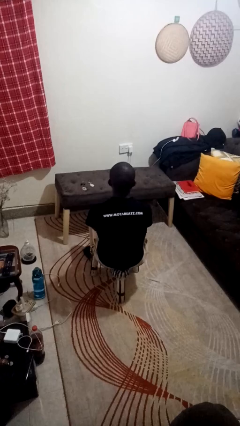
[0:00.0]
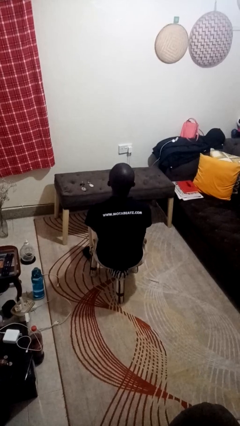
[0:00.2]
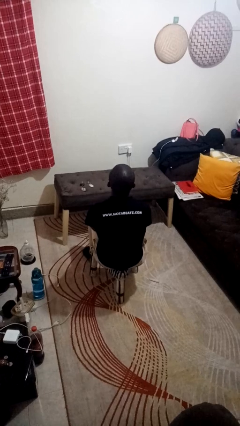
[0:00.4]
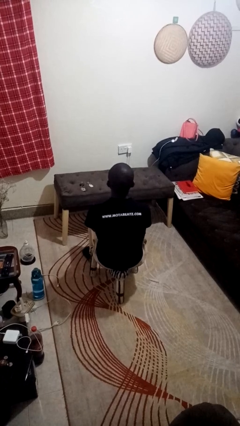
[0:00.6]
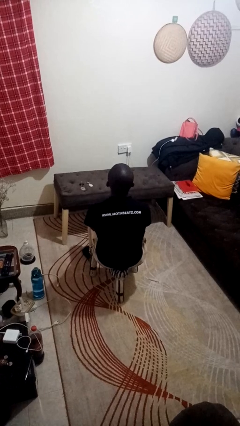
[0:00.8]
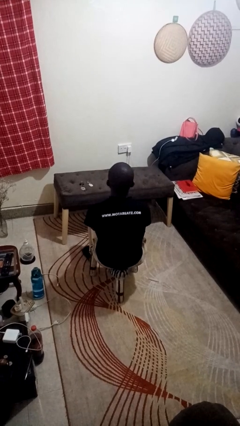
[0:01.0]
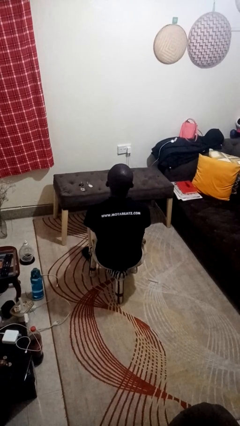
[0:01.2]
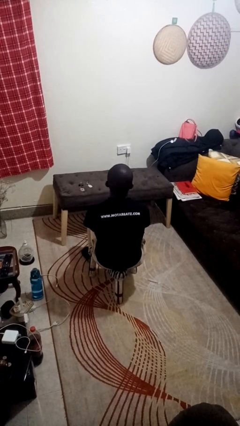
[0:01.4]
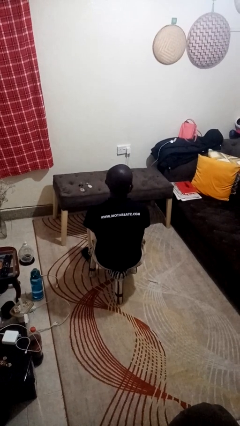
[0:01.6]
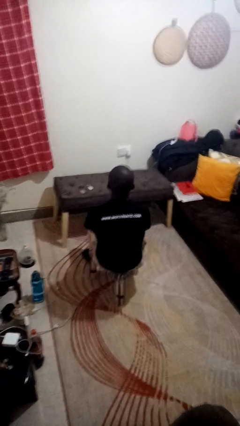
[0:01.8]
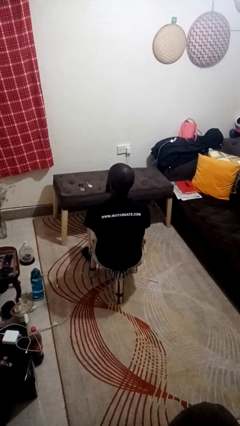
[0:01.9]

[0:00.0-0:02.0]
person nods head

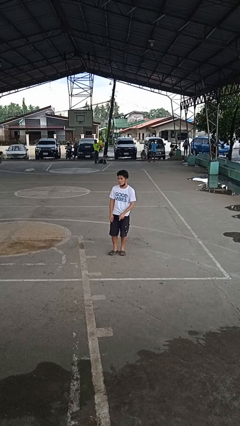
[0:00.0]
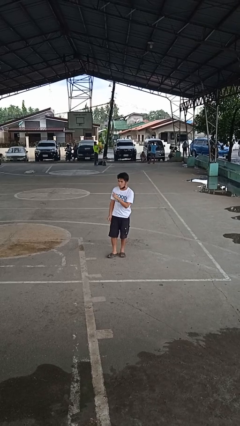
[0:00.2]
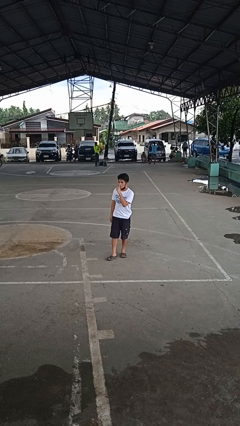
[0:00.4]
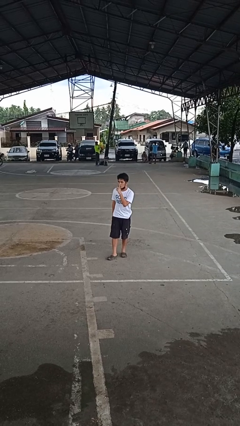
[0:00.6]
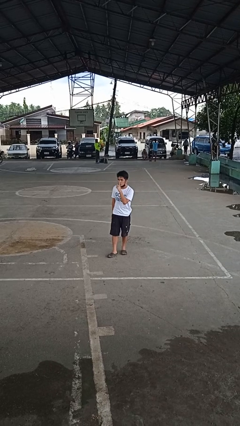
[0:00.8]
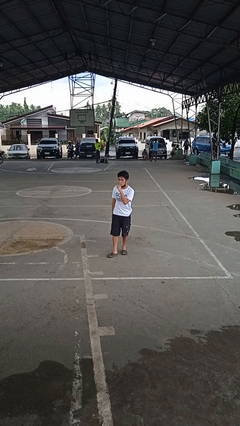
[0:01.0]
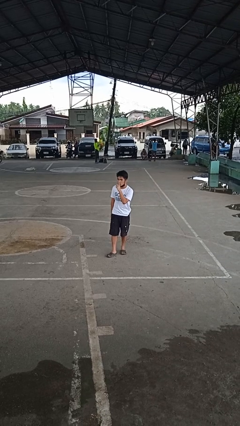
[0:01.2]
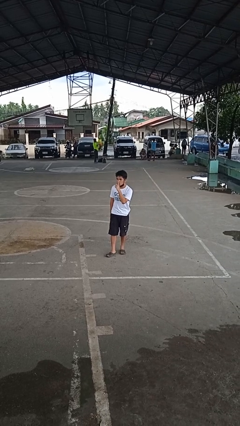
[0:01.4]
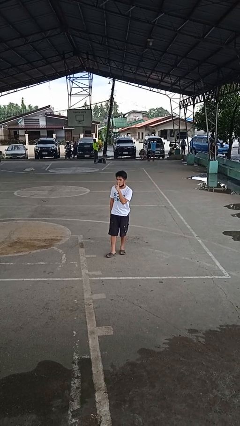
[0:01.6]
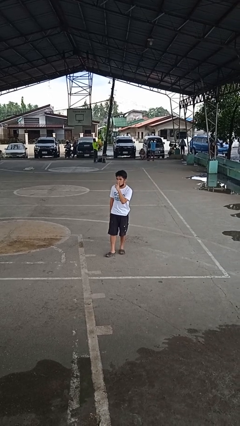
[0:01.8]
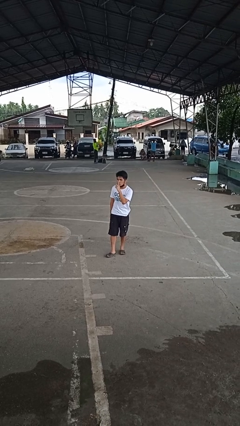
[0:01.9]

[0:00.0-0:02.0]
person gestures be quiet

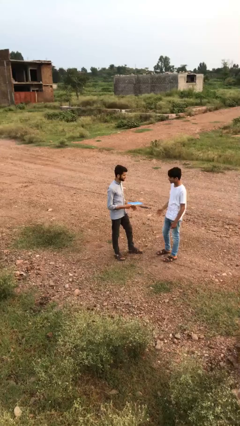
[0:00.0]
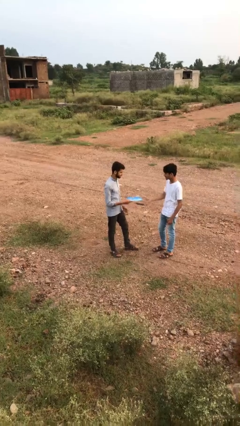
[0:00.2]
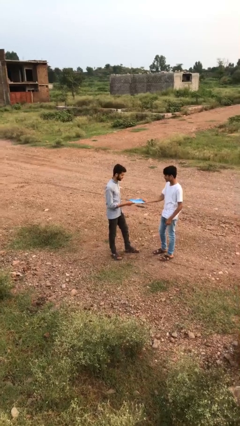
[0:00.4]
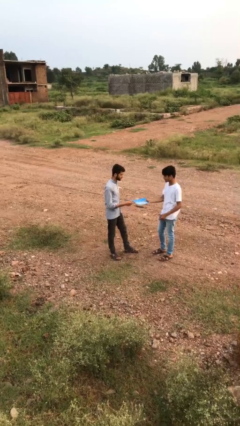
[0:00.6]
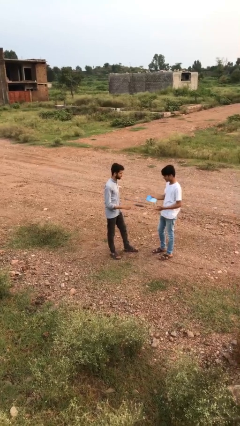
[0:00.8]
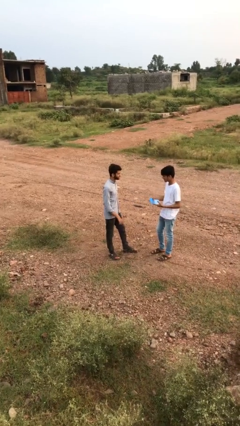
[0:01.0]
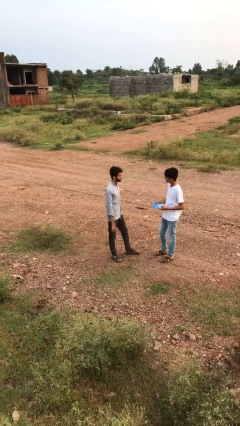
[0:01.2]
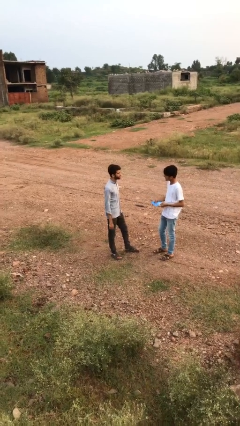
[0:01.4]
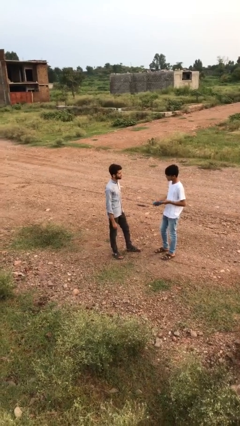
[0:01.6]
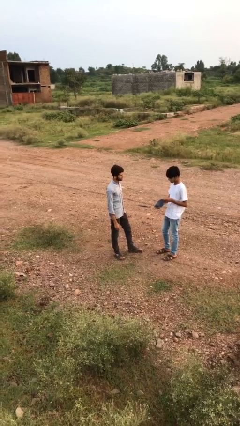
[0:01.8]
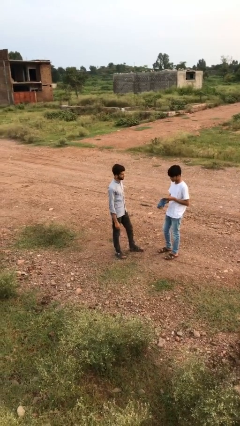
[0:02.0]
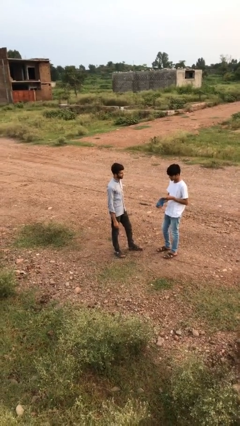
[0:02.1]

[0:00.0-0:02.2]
person transfers object to person

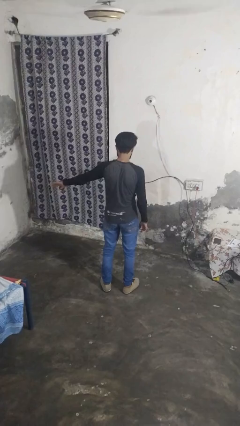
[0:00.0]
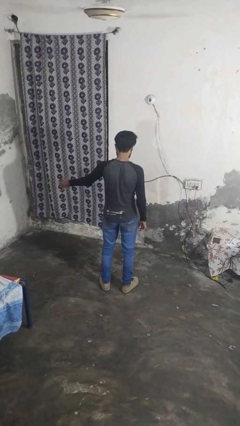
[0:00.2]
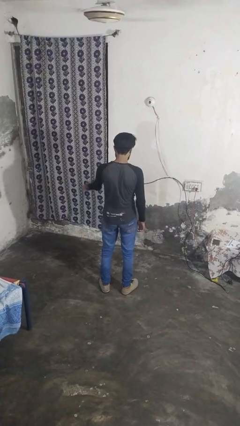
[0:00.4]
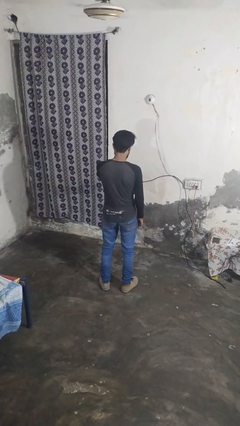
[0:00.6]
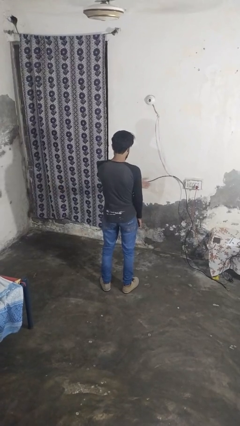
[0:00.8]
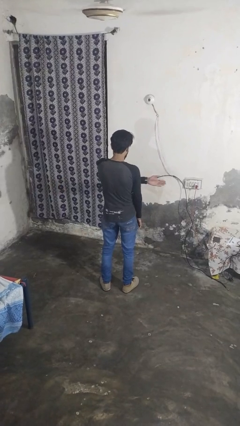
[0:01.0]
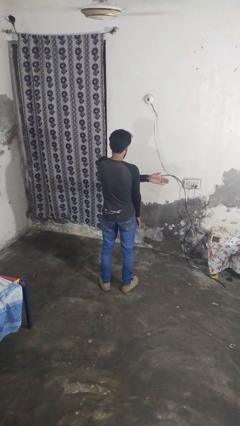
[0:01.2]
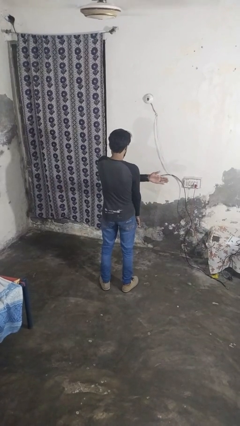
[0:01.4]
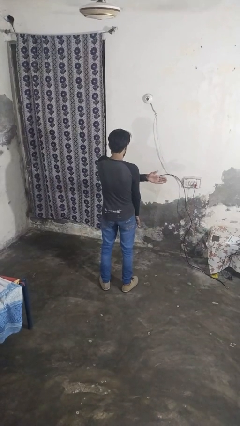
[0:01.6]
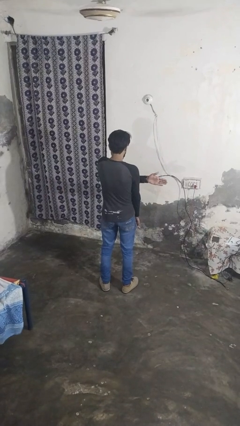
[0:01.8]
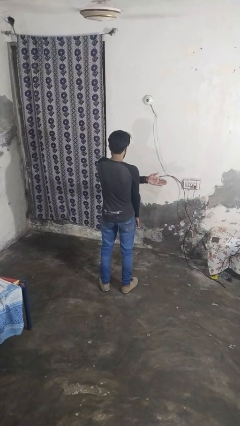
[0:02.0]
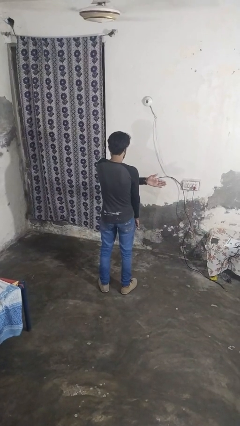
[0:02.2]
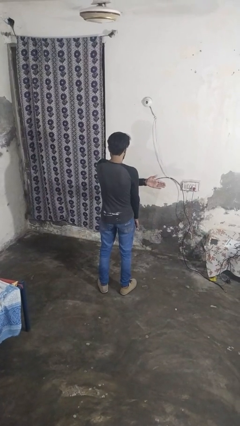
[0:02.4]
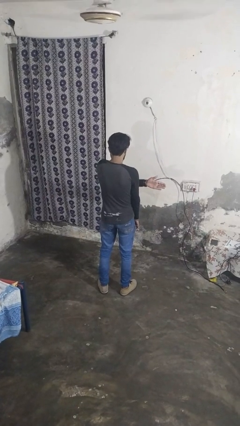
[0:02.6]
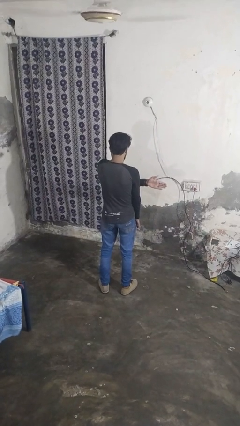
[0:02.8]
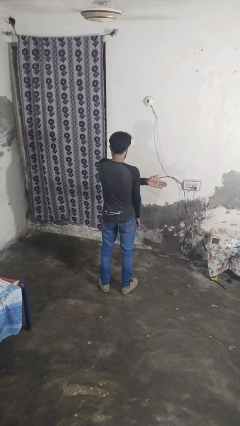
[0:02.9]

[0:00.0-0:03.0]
person gestures swipe right

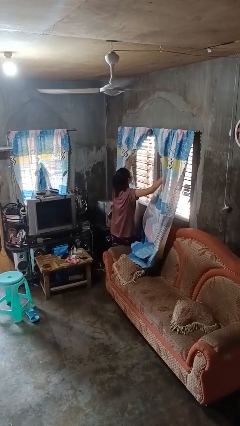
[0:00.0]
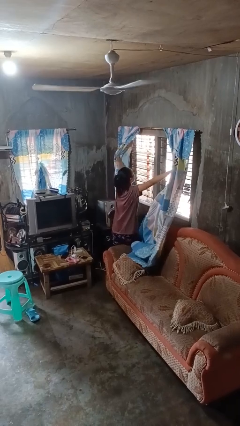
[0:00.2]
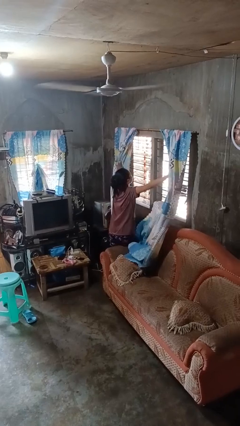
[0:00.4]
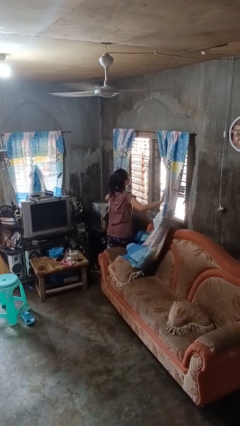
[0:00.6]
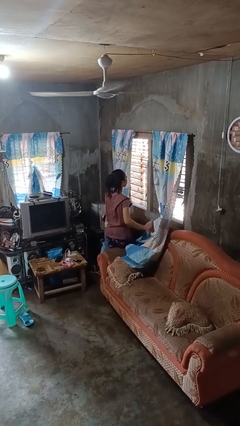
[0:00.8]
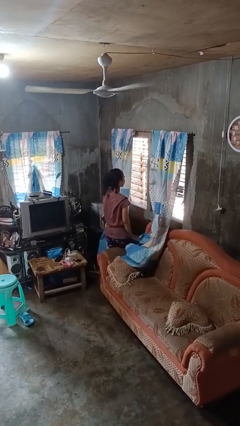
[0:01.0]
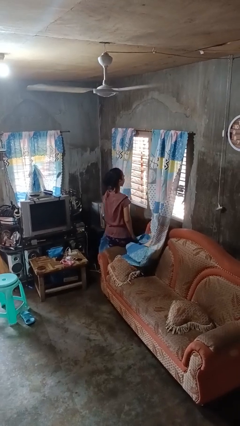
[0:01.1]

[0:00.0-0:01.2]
person opens curtains

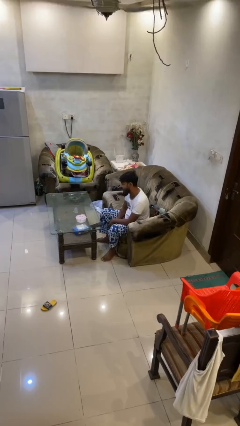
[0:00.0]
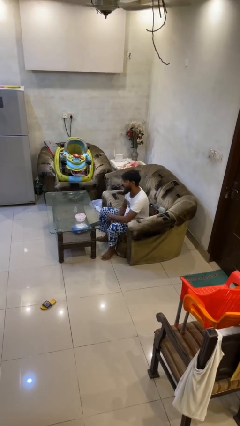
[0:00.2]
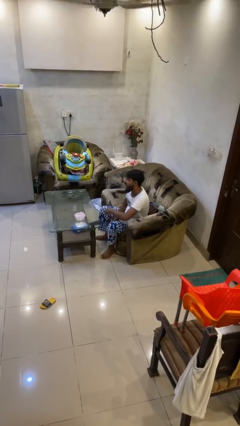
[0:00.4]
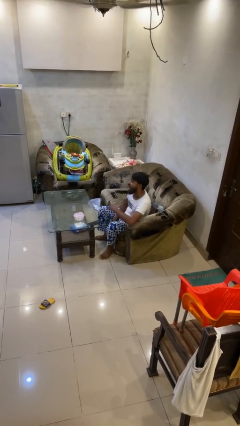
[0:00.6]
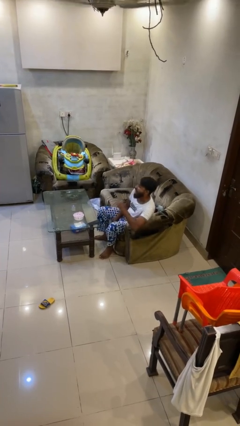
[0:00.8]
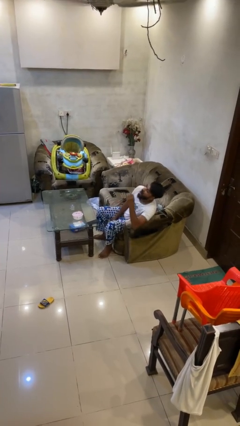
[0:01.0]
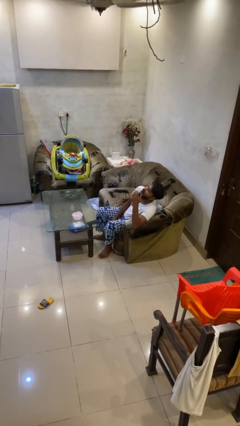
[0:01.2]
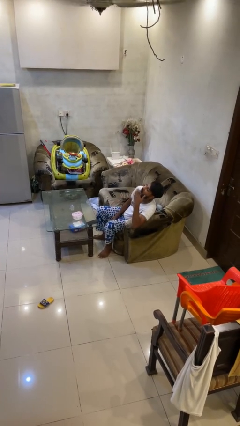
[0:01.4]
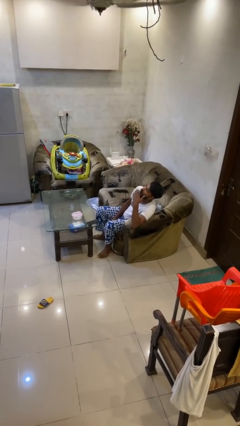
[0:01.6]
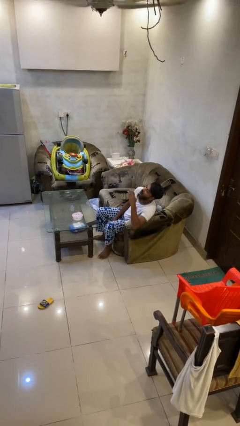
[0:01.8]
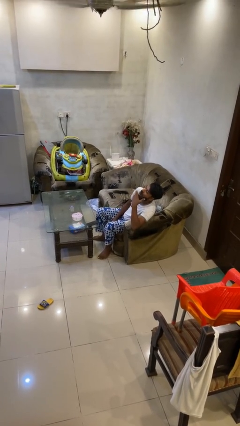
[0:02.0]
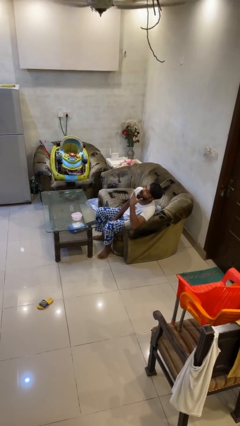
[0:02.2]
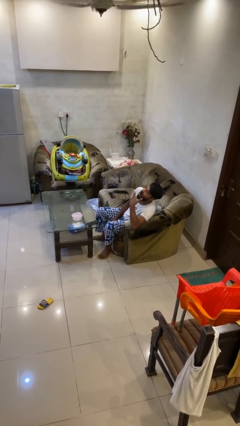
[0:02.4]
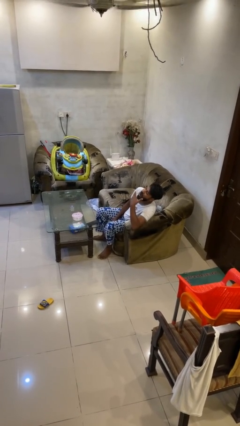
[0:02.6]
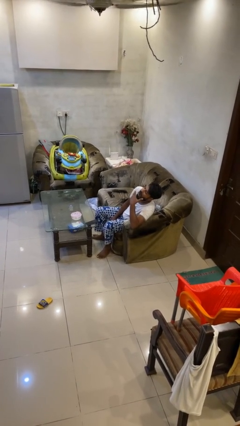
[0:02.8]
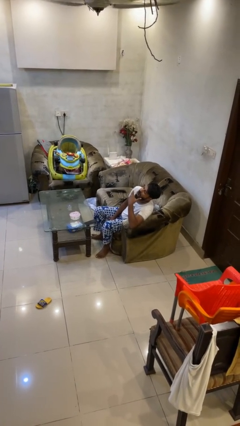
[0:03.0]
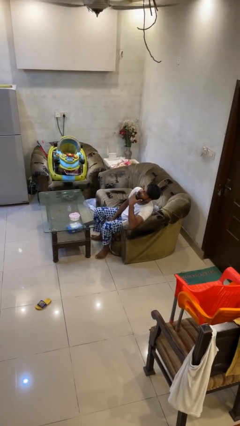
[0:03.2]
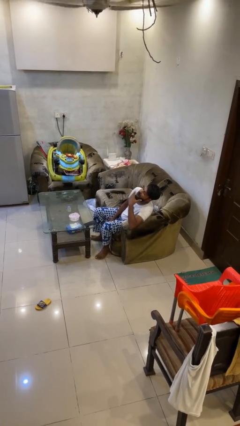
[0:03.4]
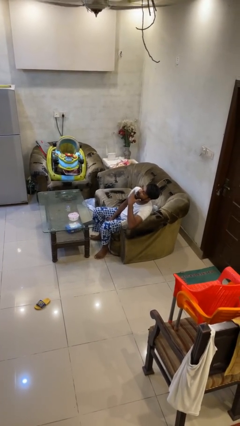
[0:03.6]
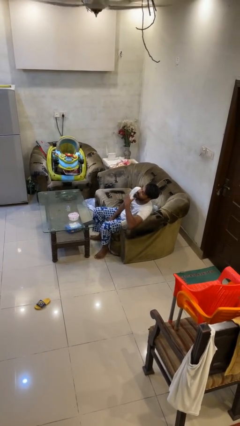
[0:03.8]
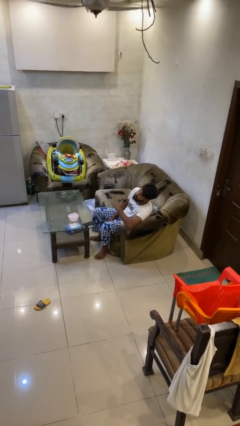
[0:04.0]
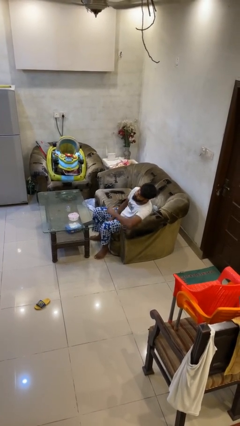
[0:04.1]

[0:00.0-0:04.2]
person yawns

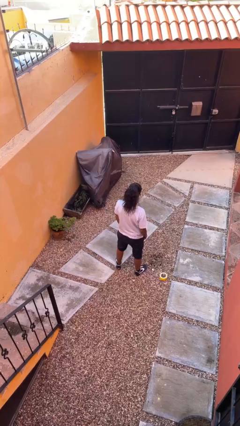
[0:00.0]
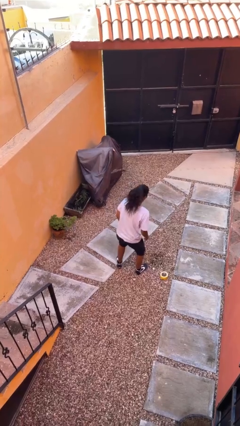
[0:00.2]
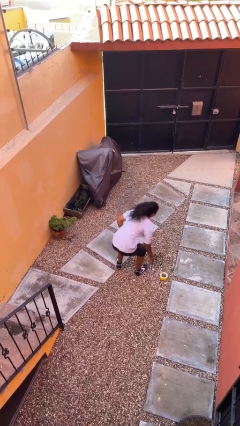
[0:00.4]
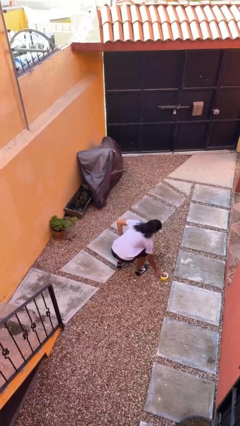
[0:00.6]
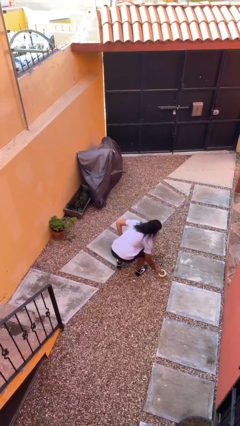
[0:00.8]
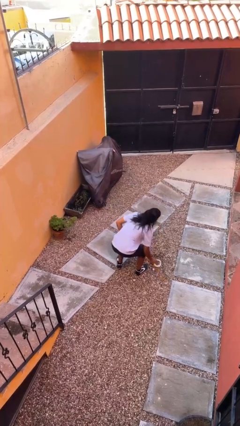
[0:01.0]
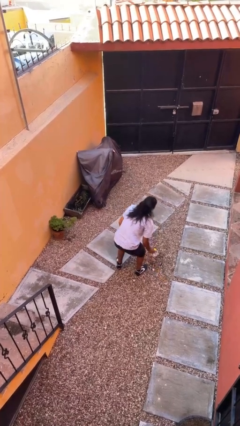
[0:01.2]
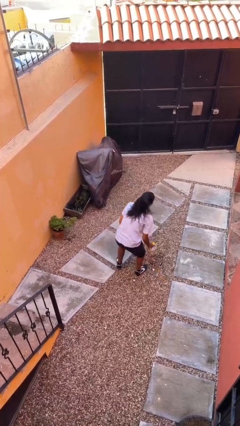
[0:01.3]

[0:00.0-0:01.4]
person picks up object from floor

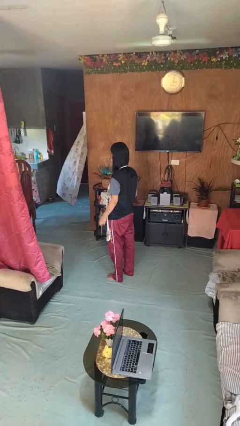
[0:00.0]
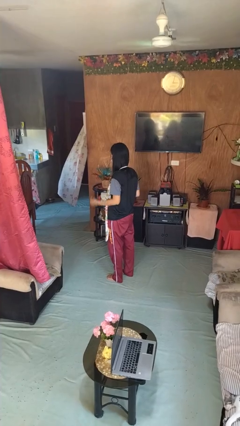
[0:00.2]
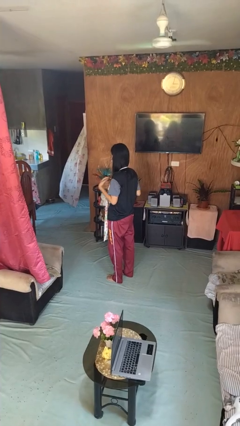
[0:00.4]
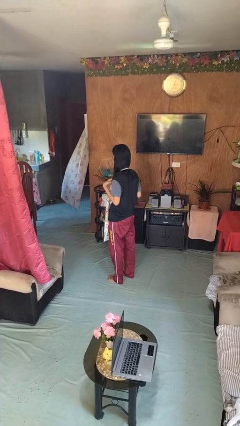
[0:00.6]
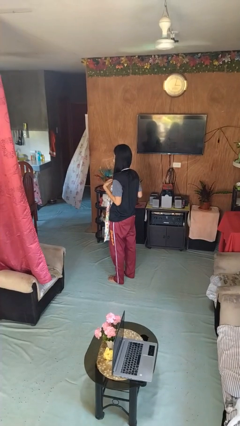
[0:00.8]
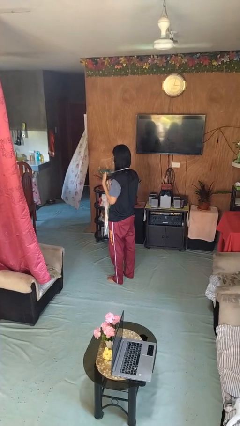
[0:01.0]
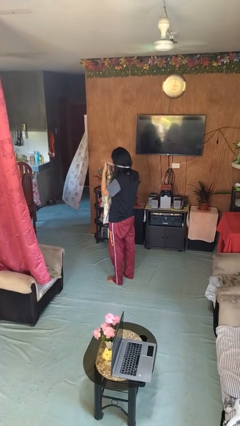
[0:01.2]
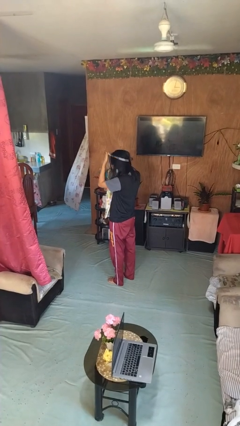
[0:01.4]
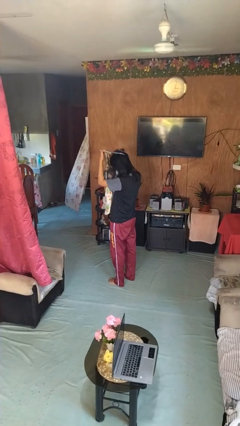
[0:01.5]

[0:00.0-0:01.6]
person takes off apron
